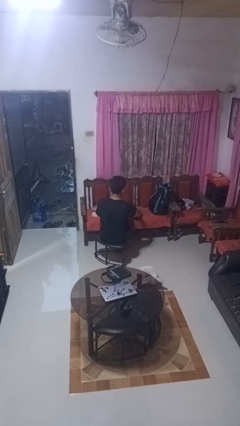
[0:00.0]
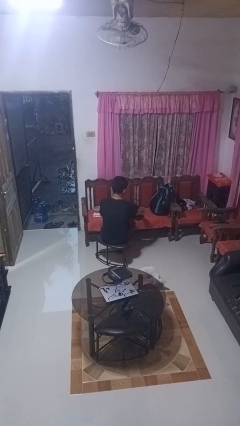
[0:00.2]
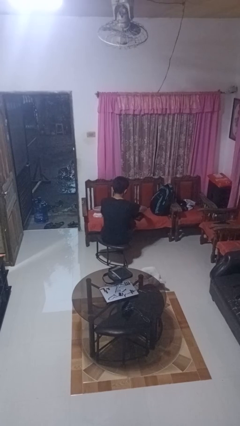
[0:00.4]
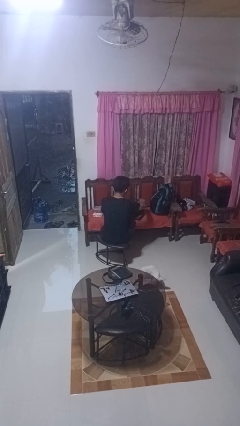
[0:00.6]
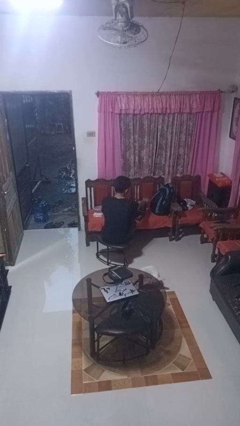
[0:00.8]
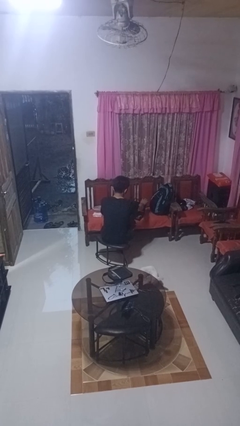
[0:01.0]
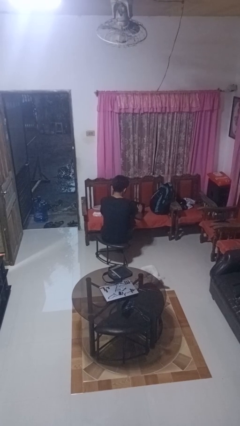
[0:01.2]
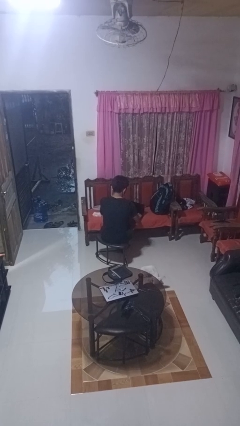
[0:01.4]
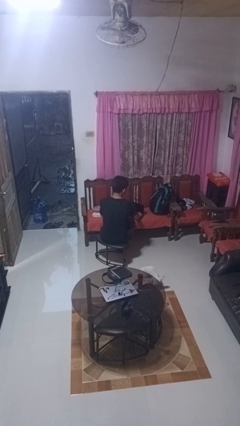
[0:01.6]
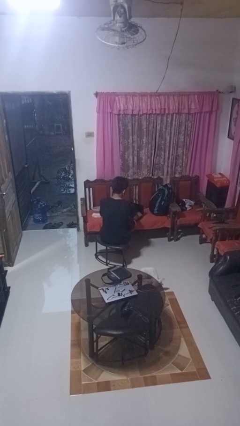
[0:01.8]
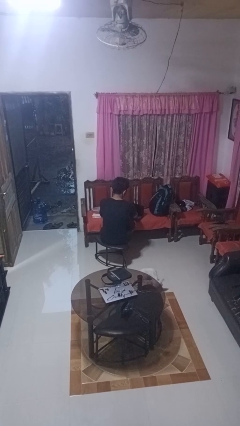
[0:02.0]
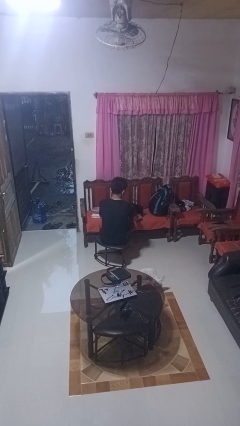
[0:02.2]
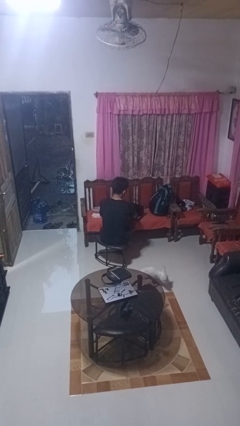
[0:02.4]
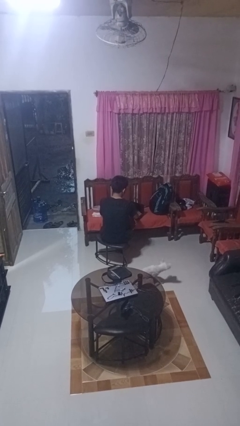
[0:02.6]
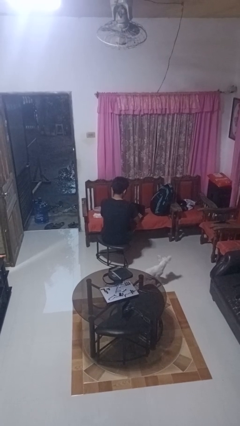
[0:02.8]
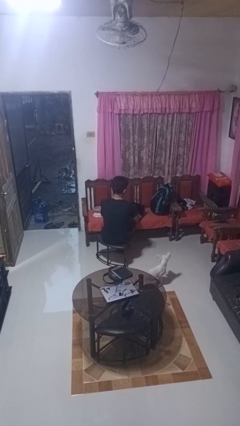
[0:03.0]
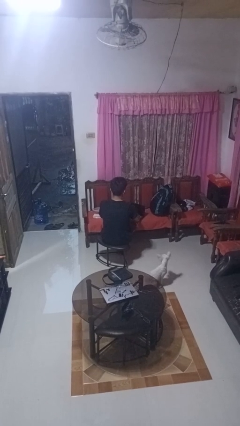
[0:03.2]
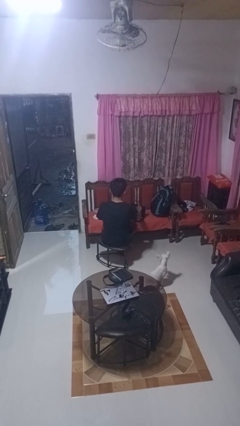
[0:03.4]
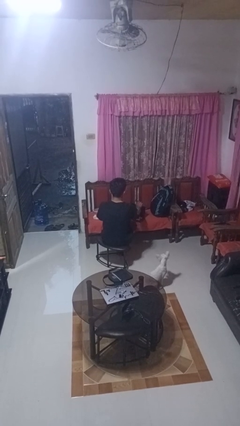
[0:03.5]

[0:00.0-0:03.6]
person opens laptop

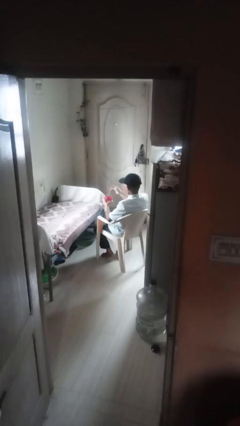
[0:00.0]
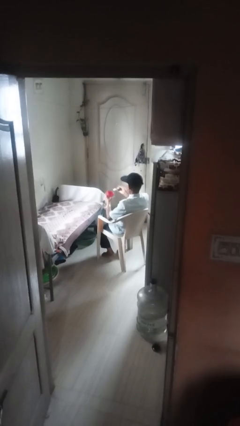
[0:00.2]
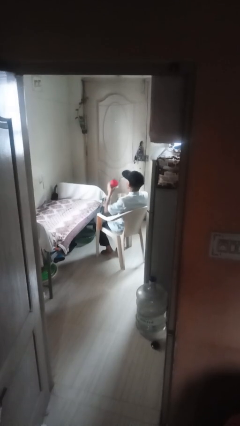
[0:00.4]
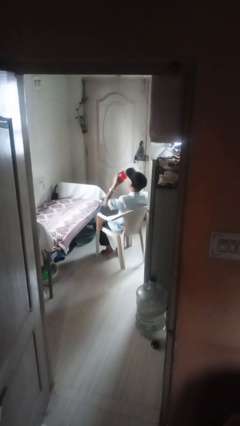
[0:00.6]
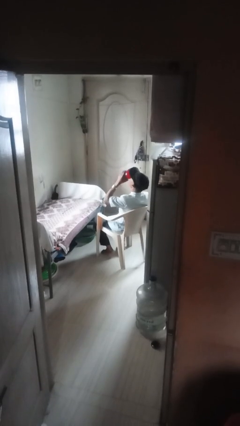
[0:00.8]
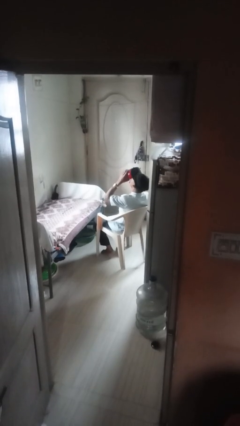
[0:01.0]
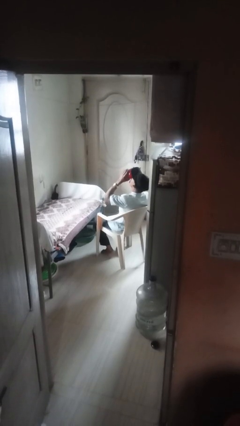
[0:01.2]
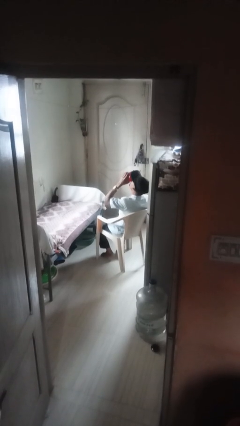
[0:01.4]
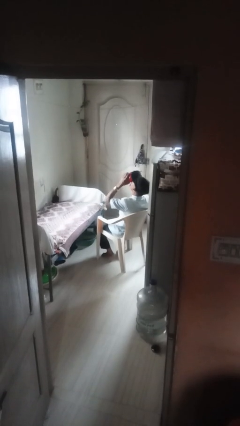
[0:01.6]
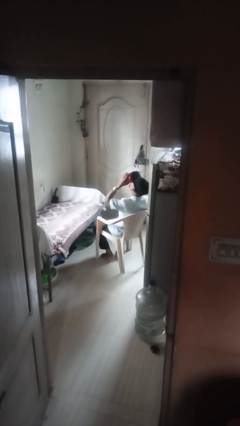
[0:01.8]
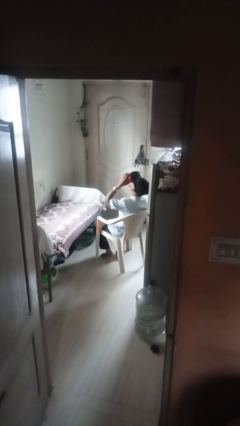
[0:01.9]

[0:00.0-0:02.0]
person drinks from mug

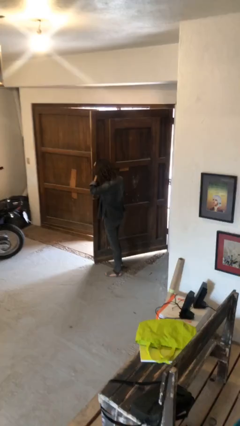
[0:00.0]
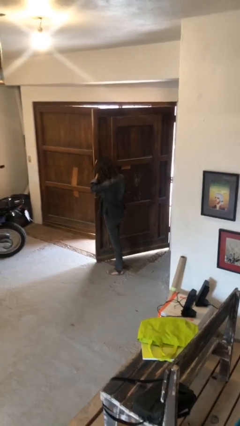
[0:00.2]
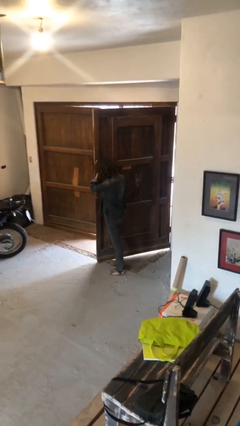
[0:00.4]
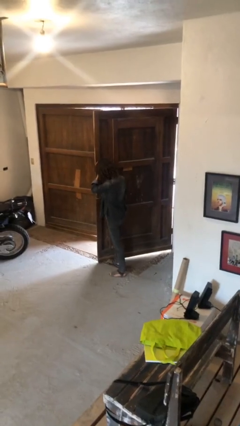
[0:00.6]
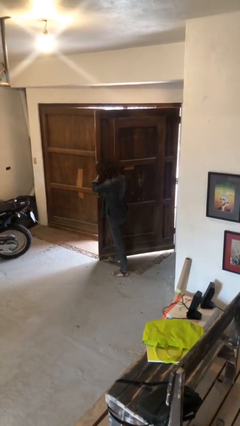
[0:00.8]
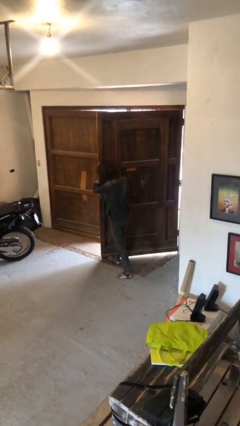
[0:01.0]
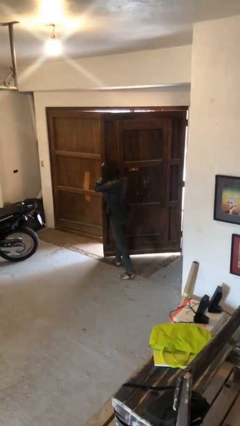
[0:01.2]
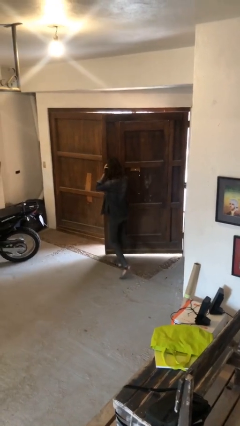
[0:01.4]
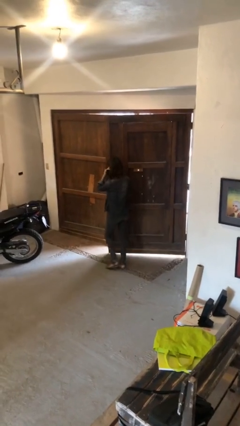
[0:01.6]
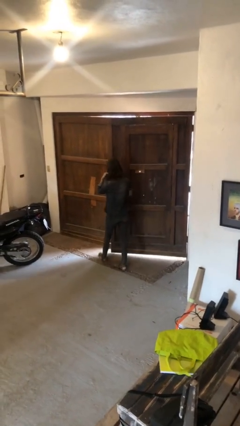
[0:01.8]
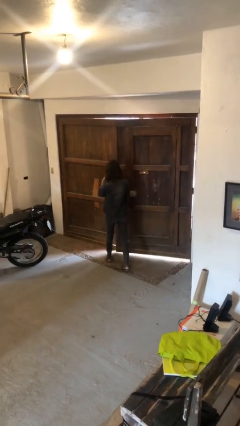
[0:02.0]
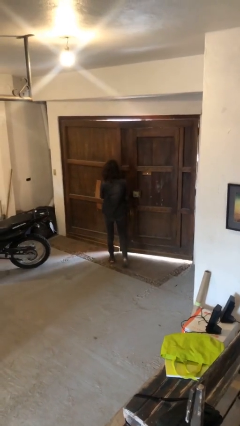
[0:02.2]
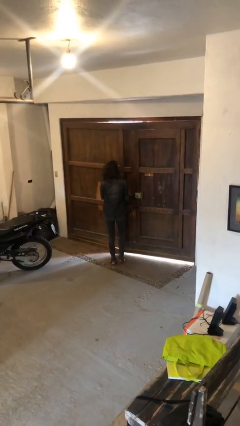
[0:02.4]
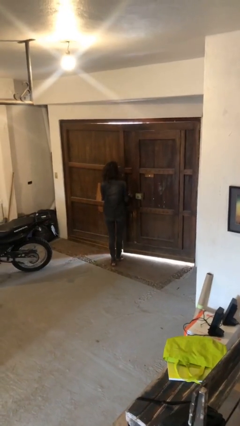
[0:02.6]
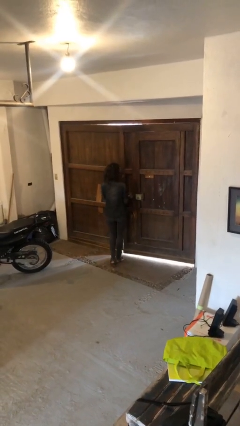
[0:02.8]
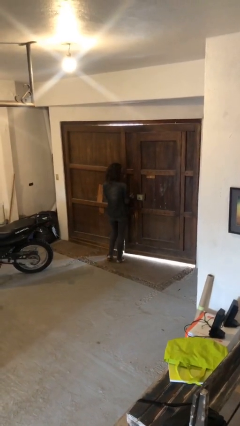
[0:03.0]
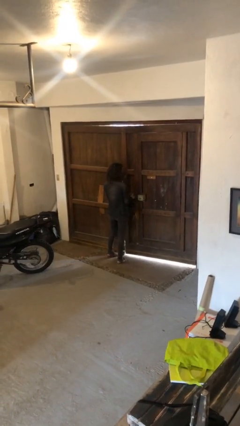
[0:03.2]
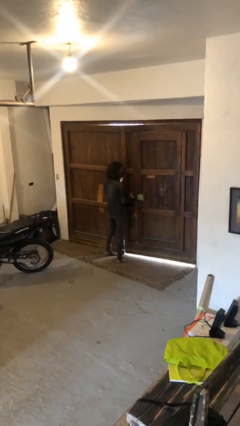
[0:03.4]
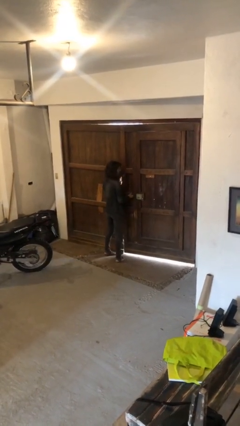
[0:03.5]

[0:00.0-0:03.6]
person closes gate

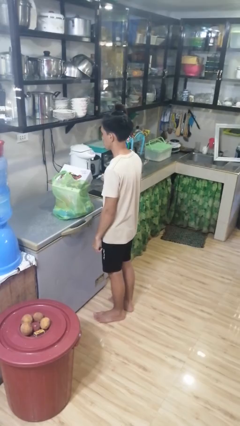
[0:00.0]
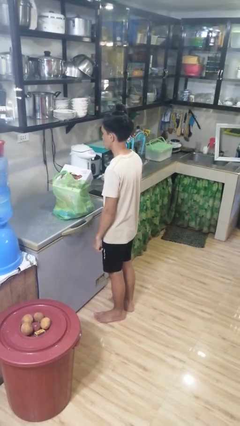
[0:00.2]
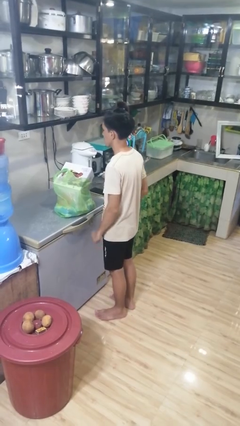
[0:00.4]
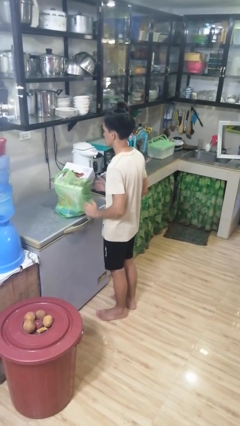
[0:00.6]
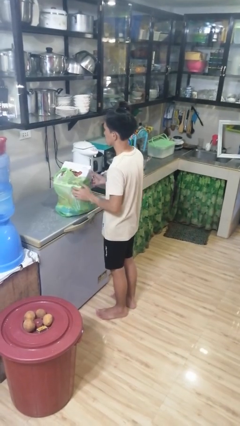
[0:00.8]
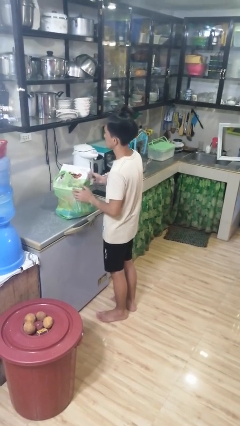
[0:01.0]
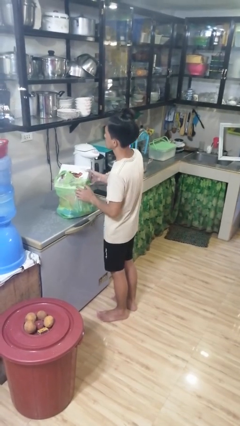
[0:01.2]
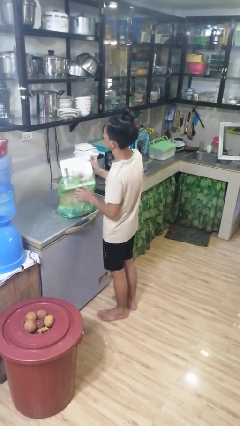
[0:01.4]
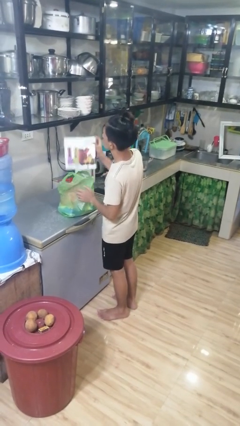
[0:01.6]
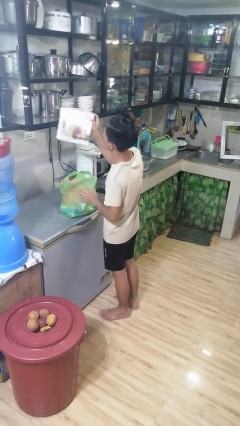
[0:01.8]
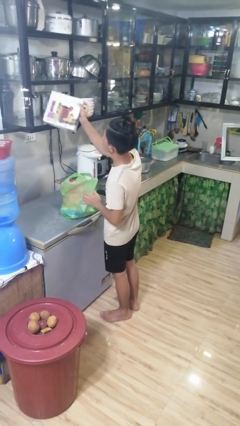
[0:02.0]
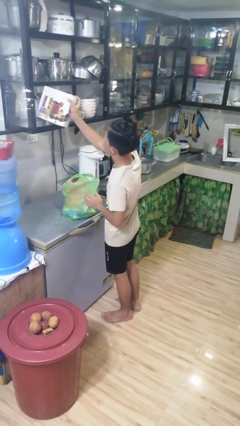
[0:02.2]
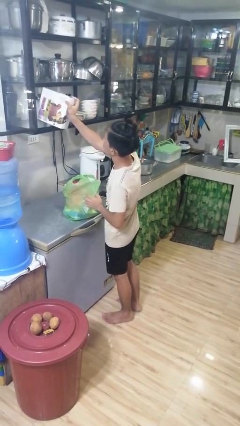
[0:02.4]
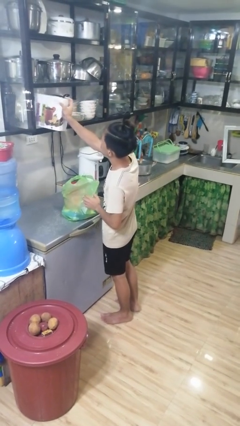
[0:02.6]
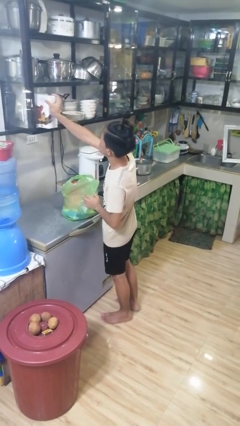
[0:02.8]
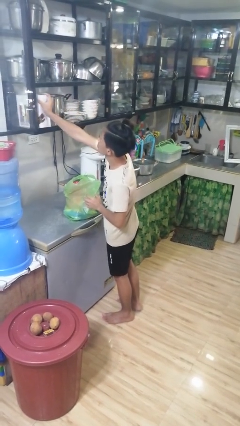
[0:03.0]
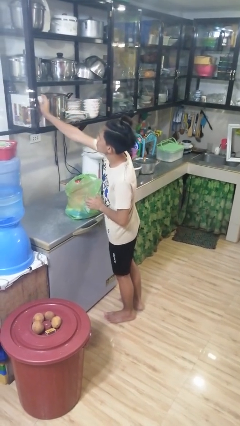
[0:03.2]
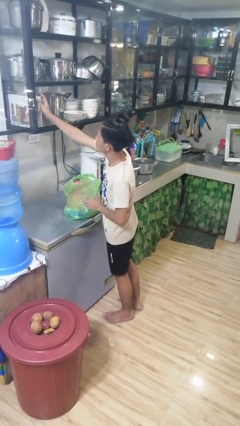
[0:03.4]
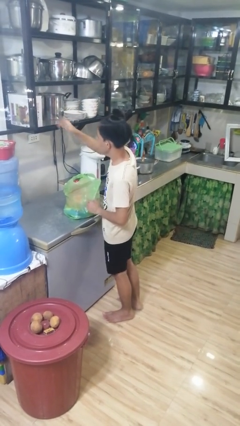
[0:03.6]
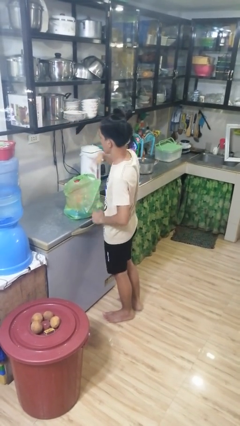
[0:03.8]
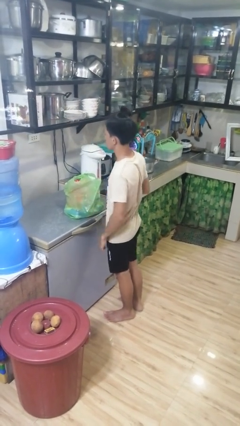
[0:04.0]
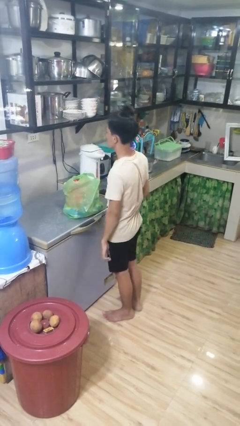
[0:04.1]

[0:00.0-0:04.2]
person loads groceries into cabinet

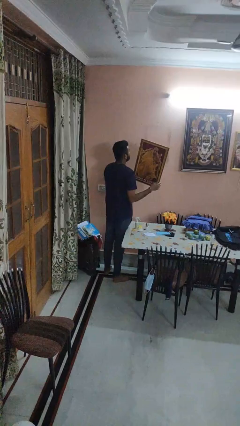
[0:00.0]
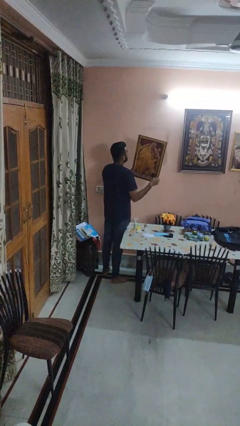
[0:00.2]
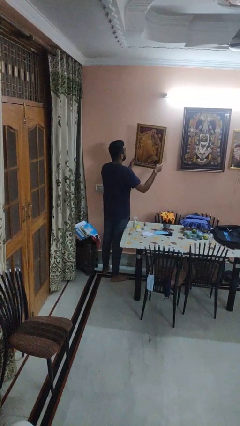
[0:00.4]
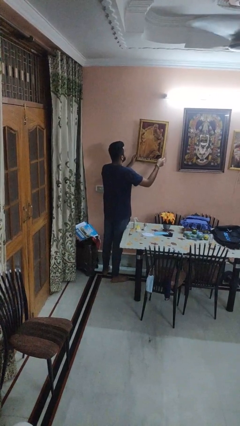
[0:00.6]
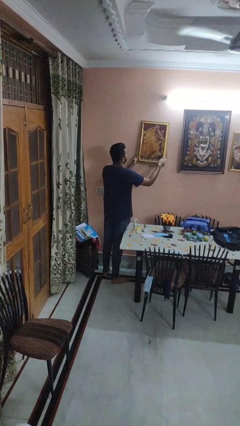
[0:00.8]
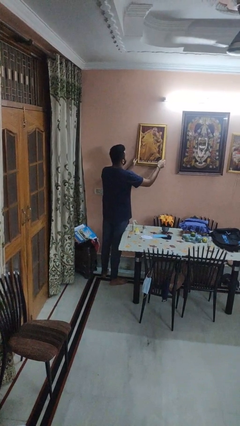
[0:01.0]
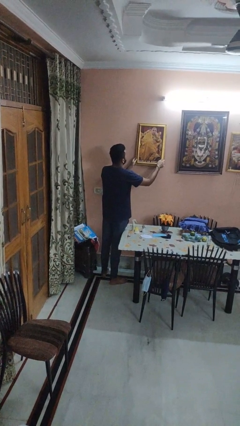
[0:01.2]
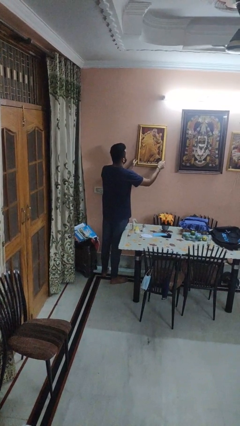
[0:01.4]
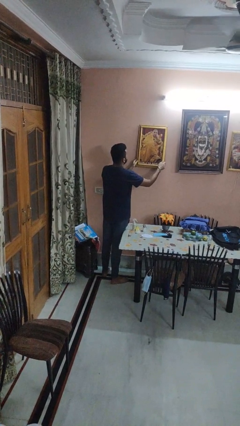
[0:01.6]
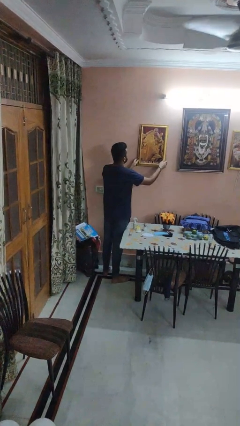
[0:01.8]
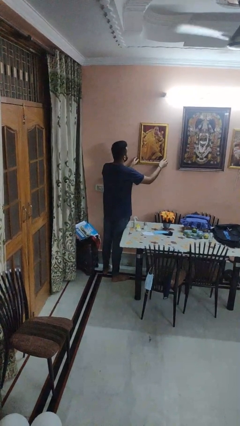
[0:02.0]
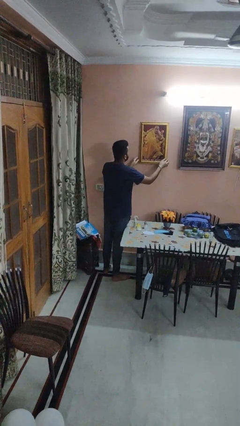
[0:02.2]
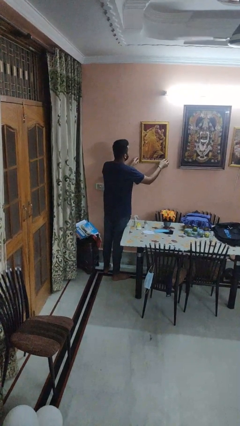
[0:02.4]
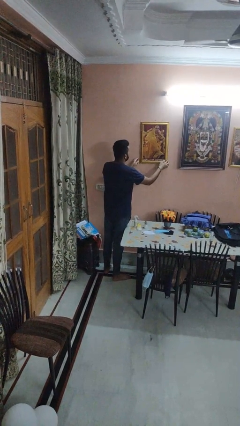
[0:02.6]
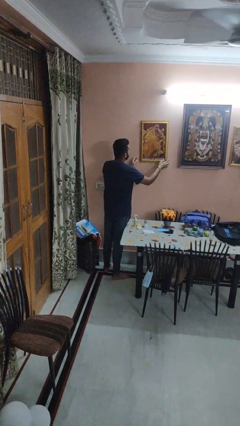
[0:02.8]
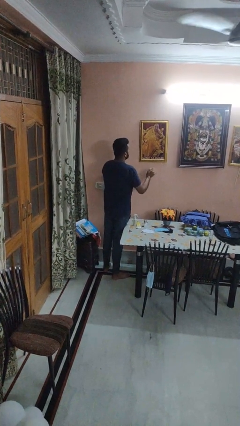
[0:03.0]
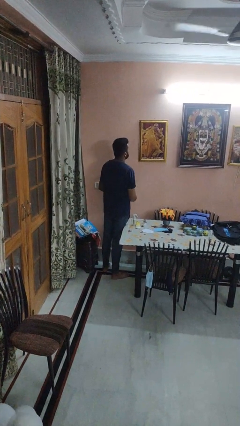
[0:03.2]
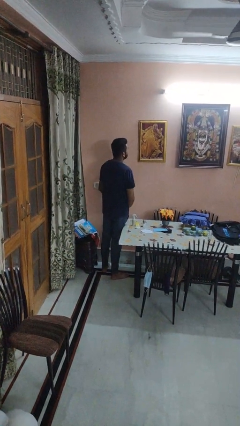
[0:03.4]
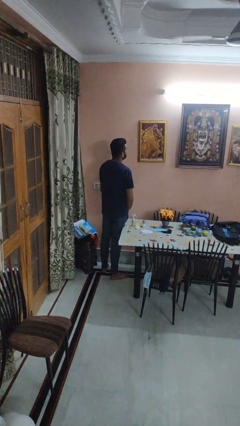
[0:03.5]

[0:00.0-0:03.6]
person puts up picture frame

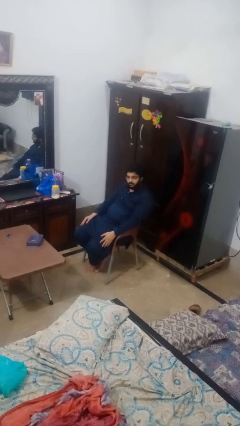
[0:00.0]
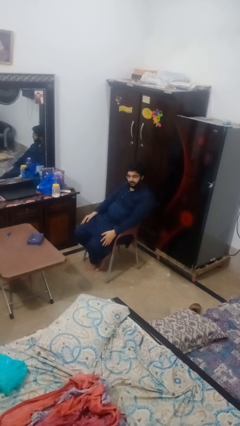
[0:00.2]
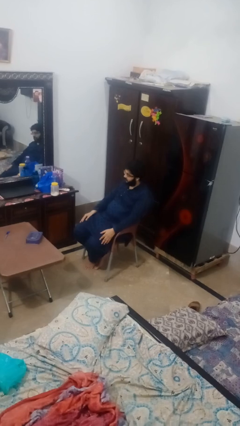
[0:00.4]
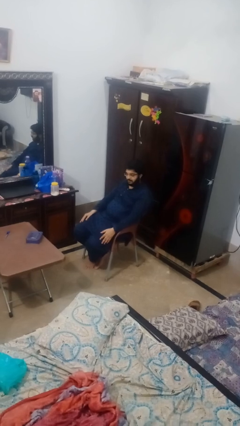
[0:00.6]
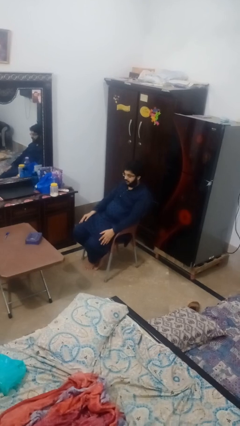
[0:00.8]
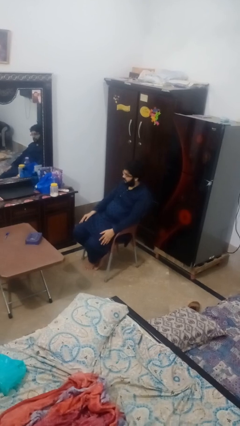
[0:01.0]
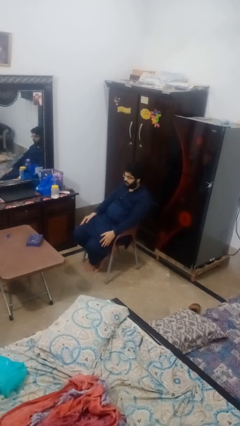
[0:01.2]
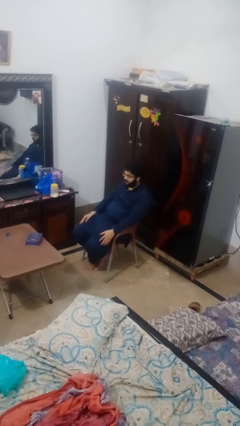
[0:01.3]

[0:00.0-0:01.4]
person shakes head
